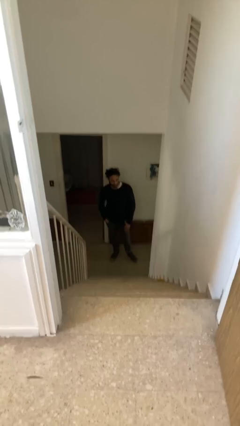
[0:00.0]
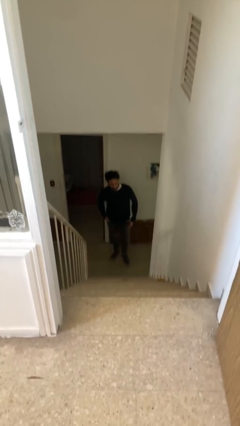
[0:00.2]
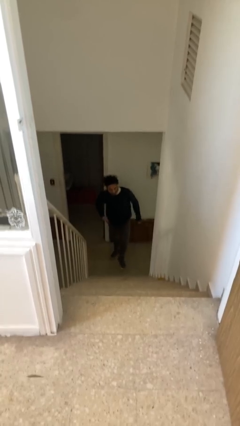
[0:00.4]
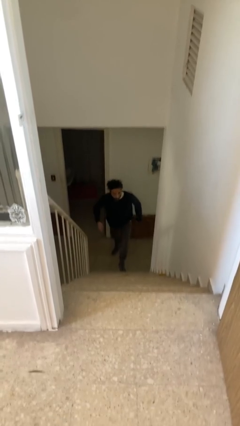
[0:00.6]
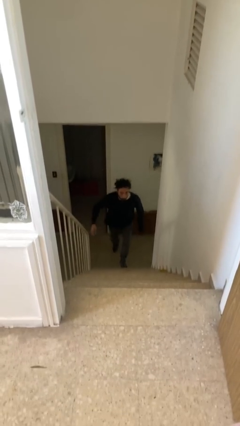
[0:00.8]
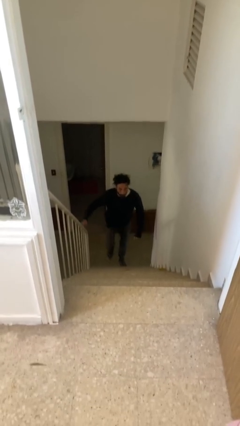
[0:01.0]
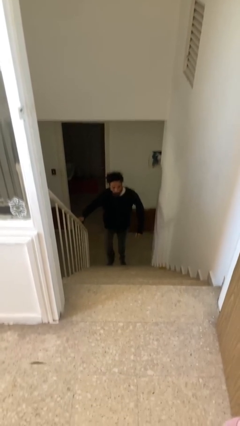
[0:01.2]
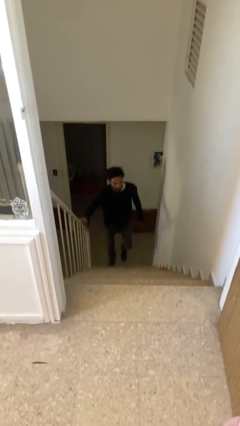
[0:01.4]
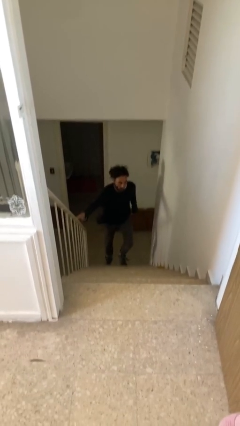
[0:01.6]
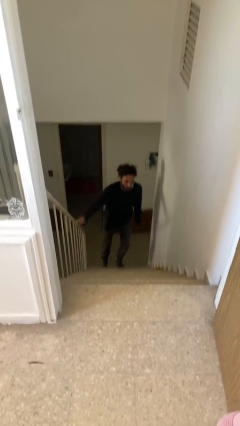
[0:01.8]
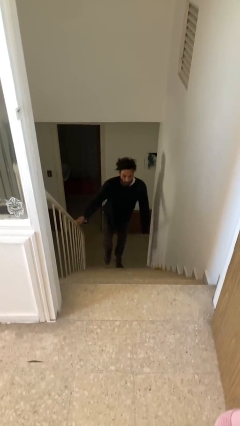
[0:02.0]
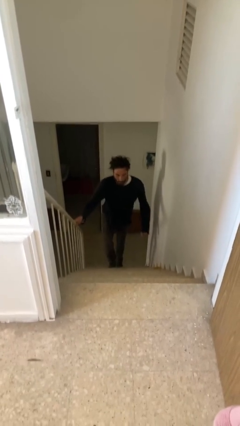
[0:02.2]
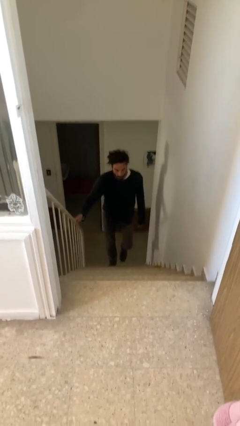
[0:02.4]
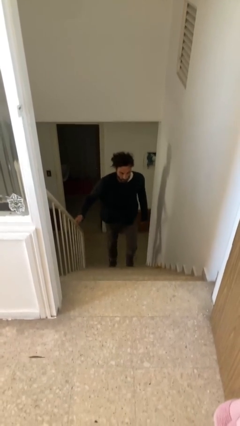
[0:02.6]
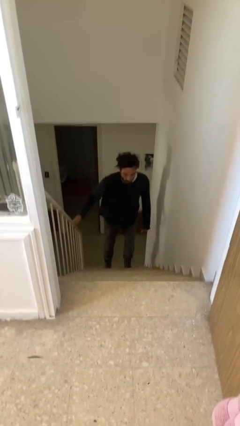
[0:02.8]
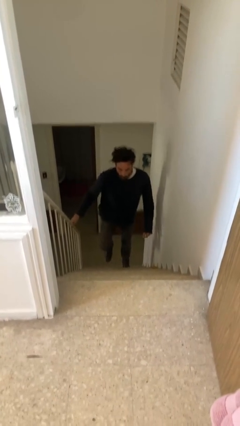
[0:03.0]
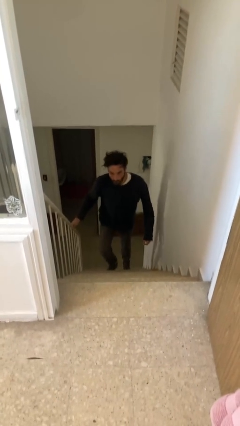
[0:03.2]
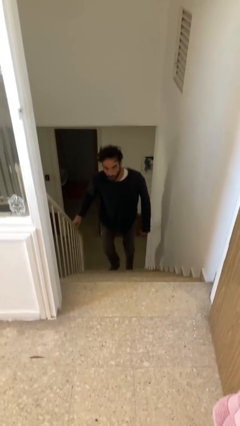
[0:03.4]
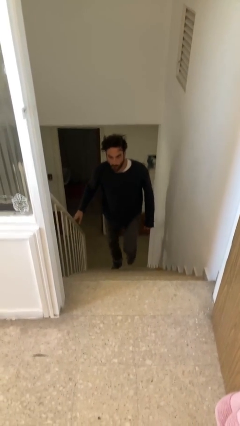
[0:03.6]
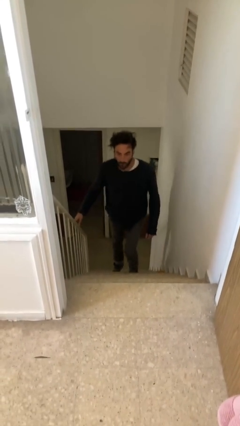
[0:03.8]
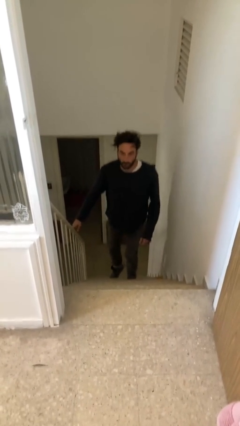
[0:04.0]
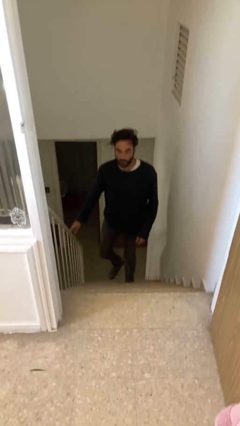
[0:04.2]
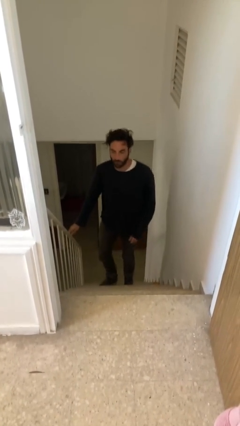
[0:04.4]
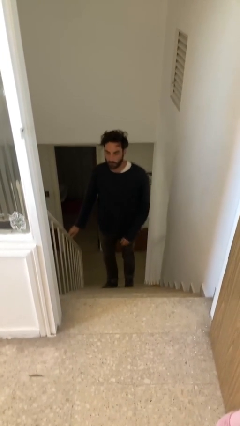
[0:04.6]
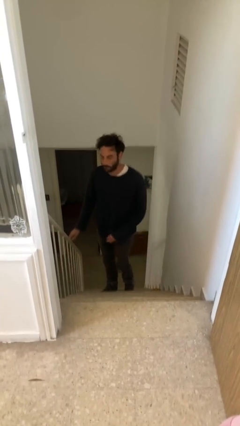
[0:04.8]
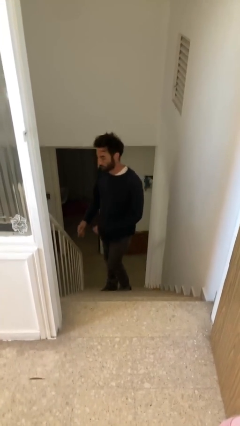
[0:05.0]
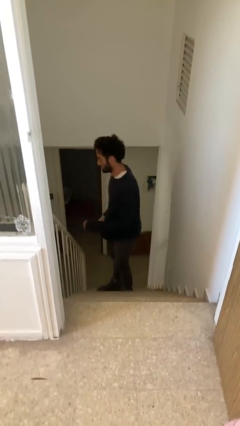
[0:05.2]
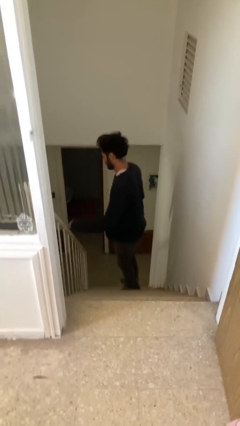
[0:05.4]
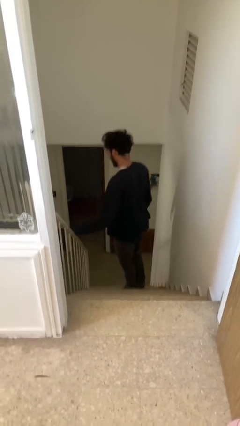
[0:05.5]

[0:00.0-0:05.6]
person climbs up stairs

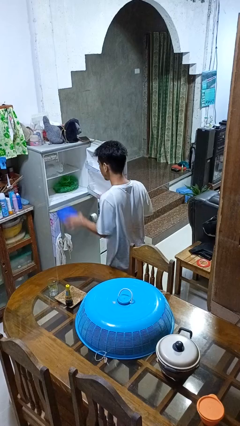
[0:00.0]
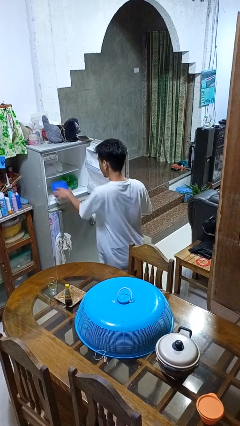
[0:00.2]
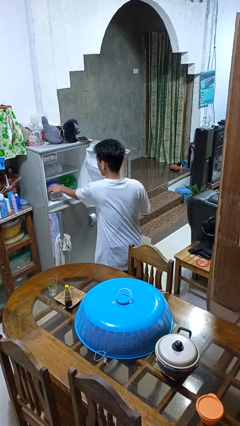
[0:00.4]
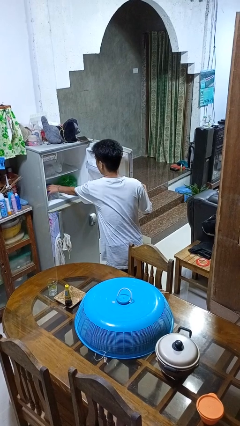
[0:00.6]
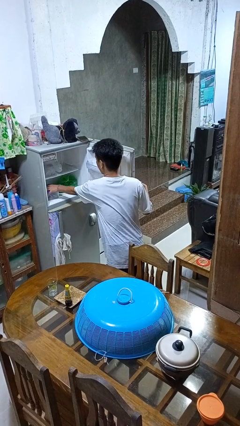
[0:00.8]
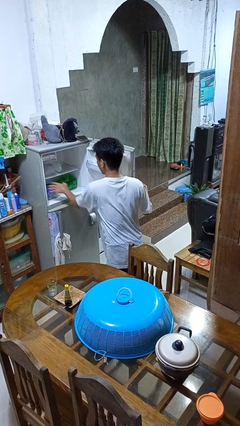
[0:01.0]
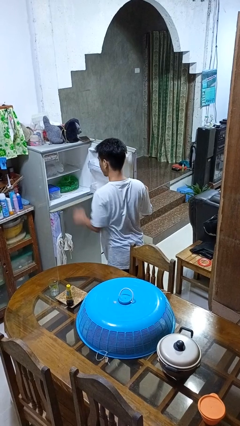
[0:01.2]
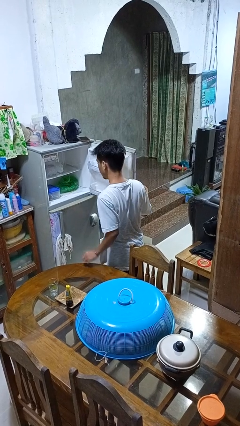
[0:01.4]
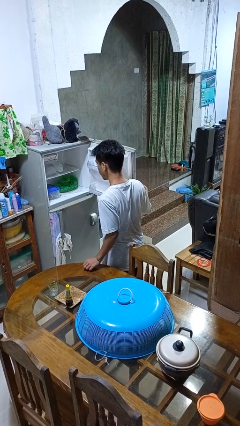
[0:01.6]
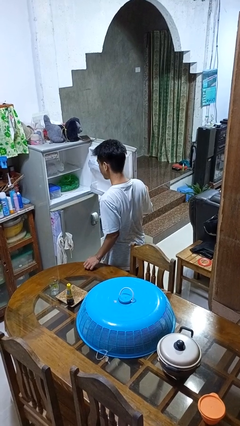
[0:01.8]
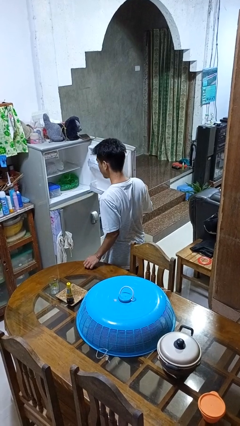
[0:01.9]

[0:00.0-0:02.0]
person puts object into refrigerator

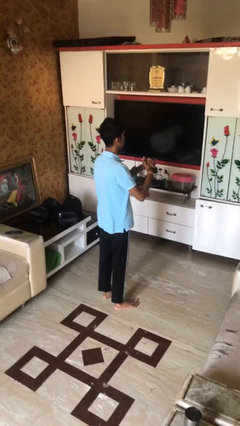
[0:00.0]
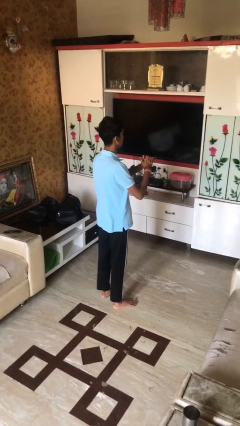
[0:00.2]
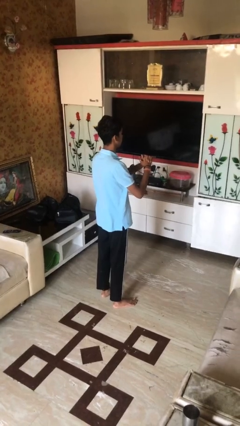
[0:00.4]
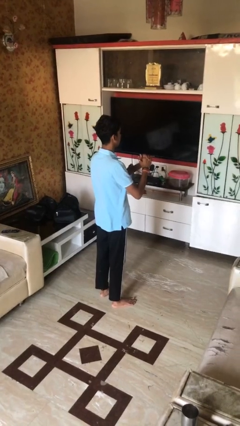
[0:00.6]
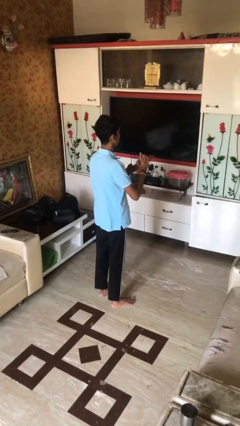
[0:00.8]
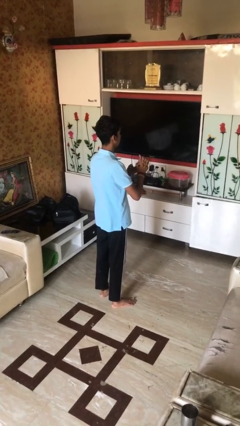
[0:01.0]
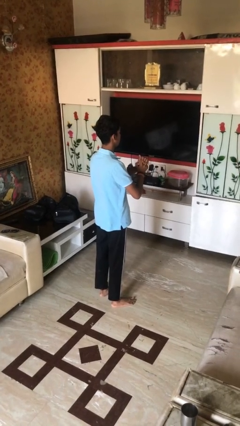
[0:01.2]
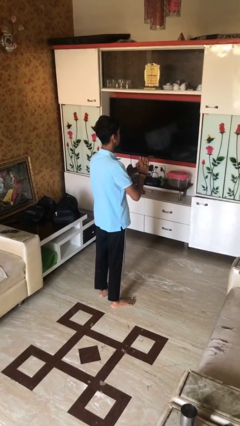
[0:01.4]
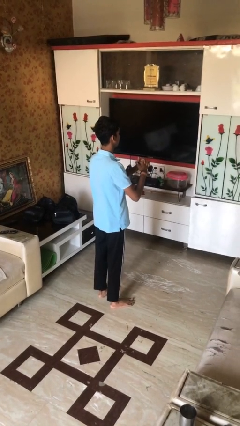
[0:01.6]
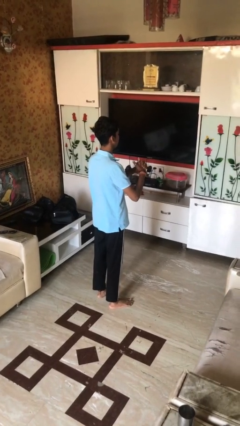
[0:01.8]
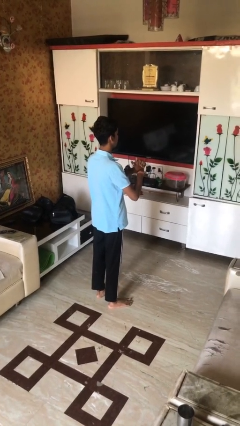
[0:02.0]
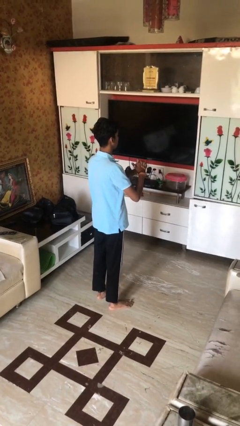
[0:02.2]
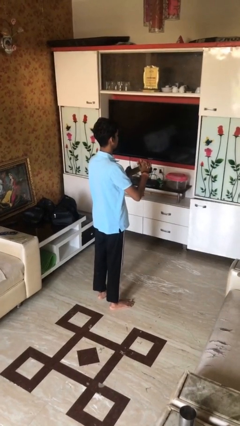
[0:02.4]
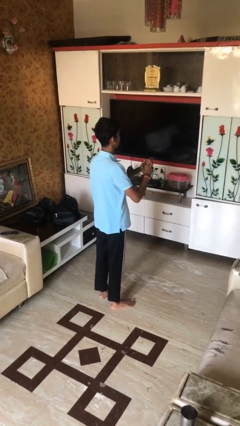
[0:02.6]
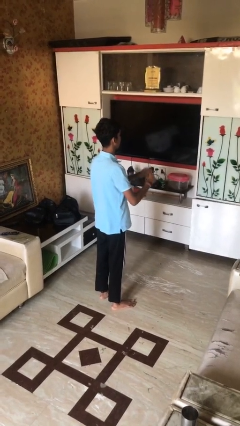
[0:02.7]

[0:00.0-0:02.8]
person cracks knuckles

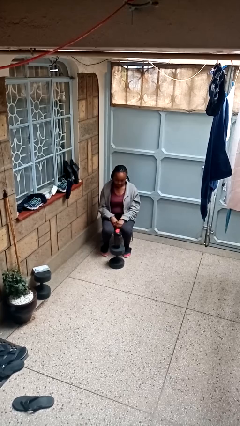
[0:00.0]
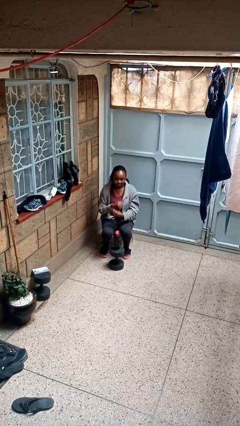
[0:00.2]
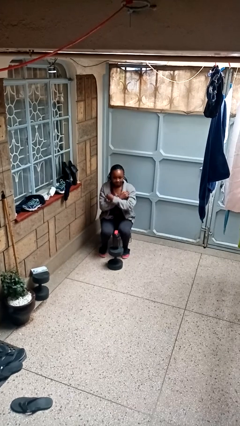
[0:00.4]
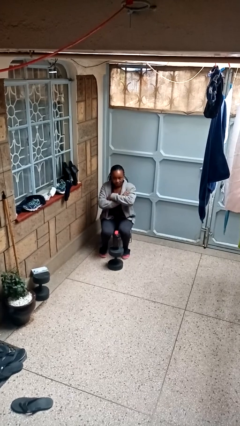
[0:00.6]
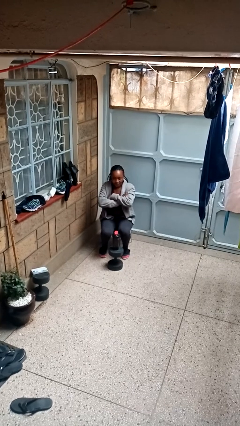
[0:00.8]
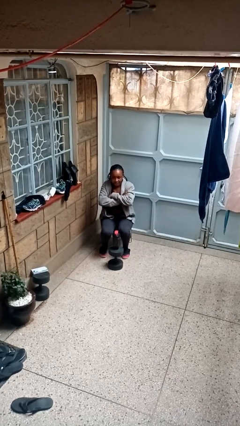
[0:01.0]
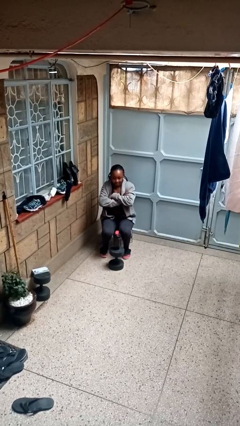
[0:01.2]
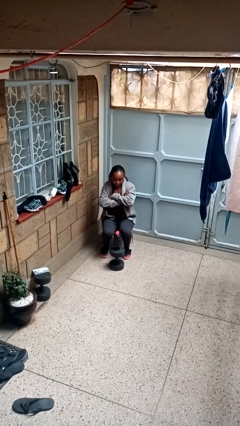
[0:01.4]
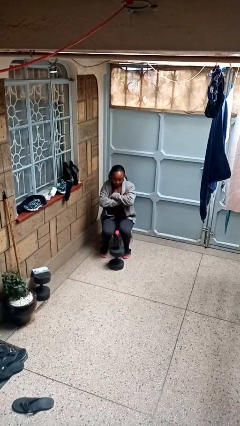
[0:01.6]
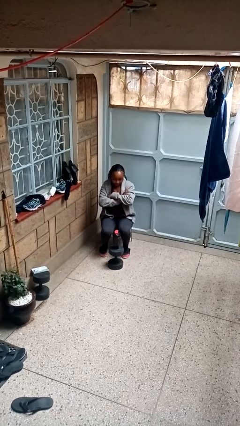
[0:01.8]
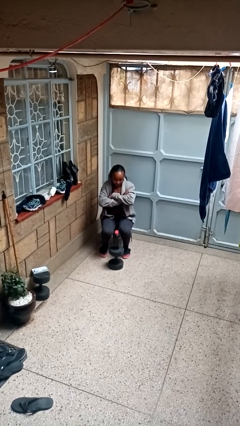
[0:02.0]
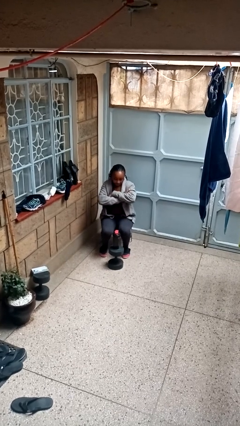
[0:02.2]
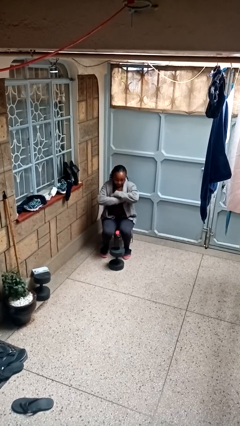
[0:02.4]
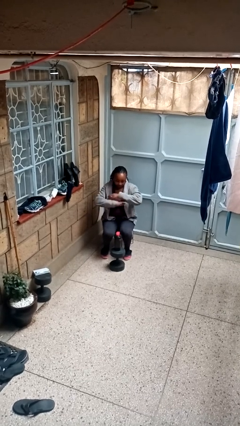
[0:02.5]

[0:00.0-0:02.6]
person gestures arms x

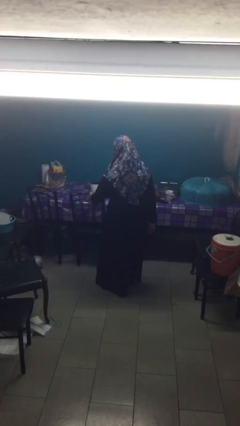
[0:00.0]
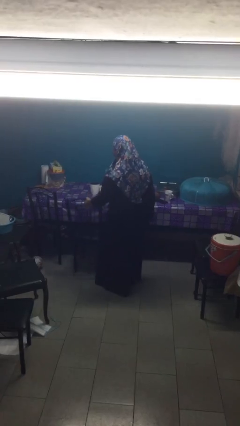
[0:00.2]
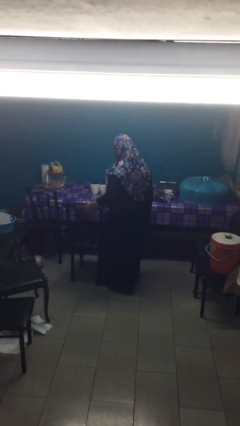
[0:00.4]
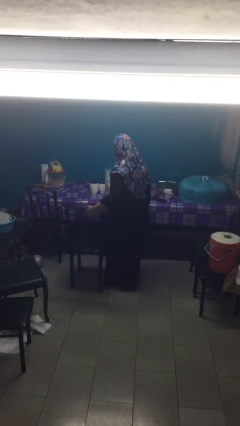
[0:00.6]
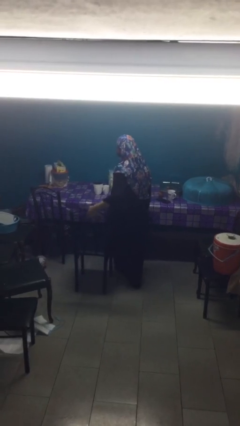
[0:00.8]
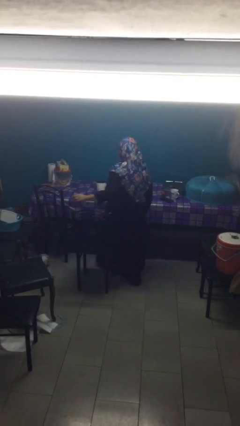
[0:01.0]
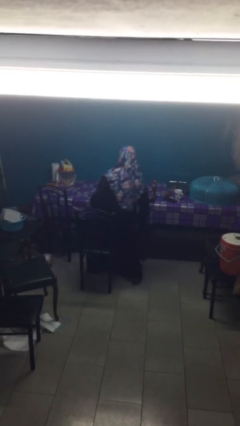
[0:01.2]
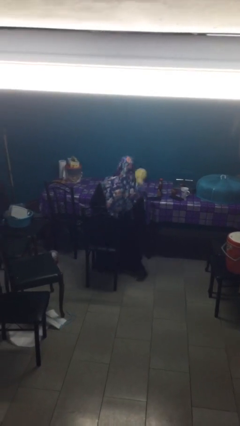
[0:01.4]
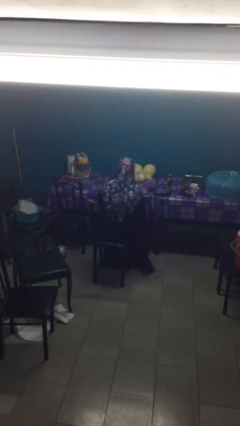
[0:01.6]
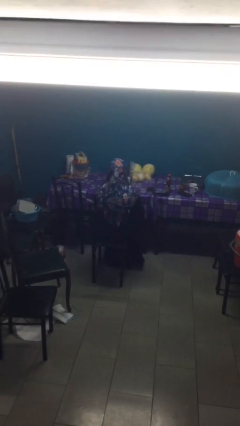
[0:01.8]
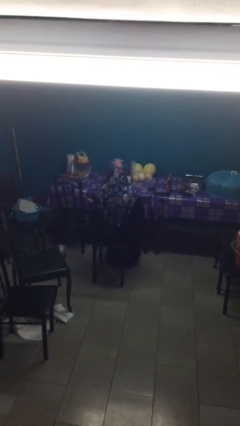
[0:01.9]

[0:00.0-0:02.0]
person sits down

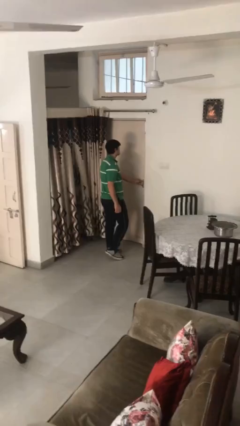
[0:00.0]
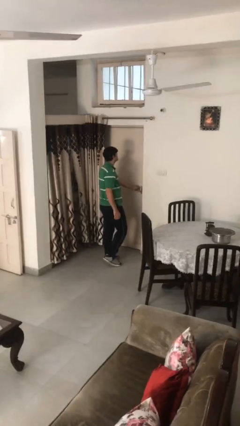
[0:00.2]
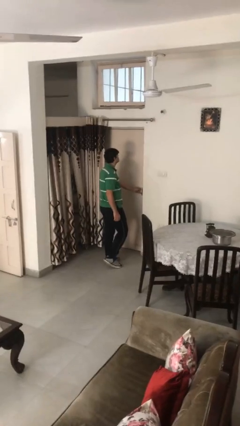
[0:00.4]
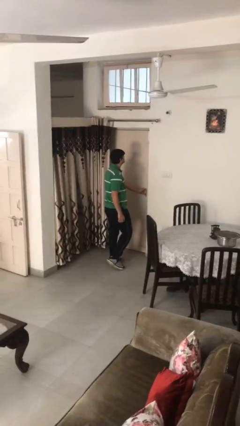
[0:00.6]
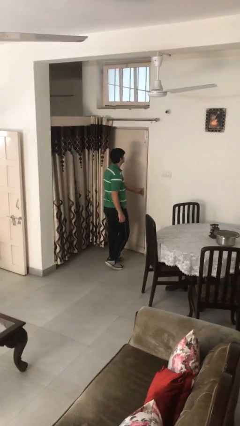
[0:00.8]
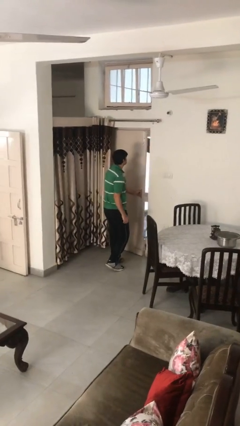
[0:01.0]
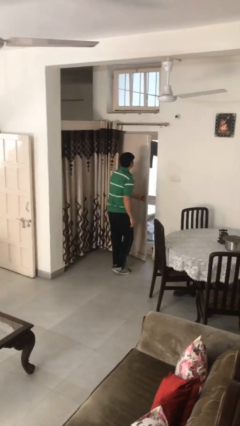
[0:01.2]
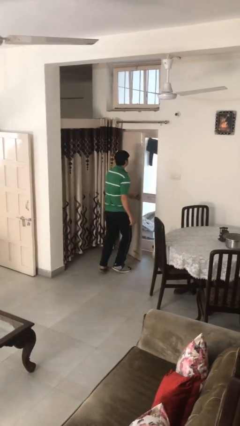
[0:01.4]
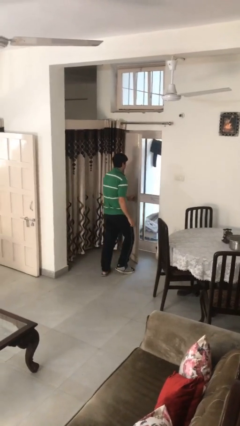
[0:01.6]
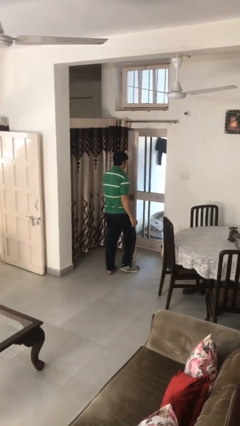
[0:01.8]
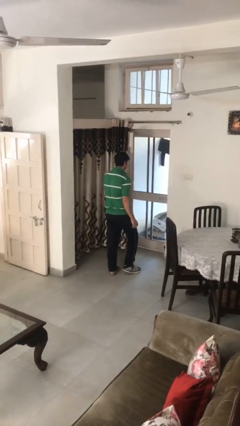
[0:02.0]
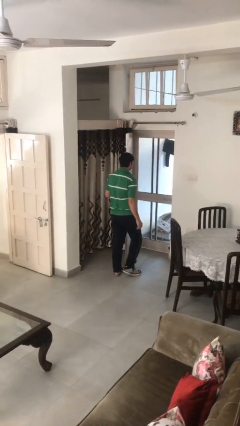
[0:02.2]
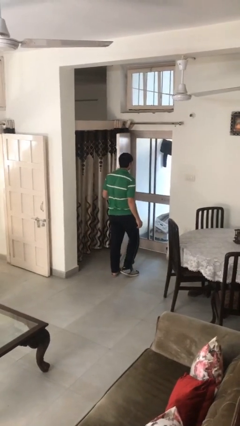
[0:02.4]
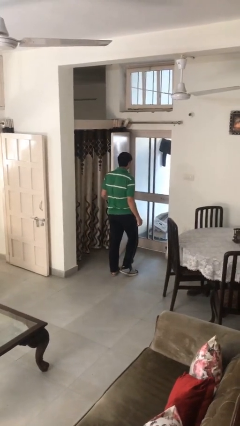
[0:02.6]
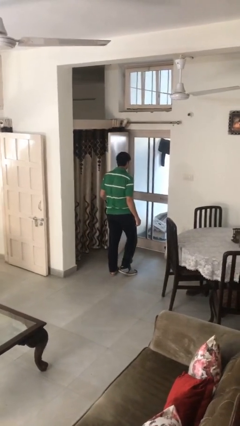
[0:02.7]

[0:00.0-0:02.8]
person opens facility door
